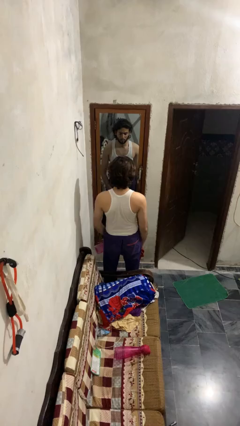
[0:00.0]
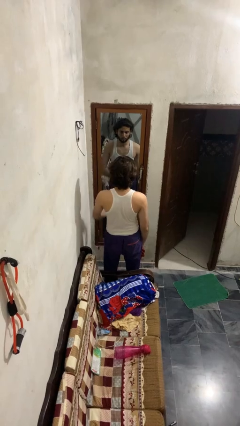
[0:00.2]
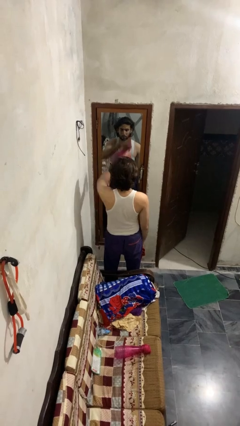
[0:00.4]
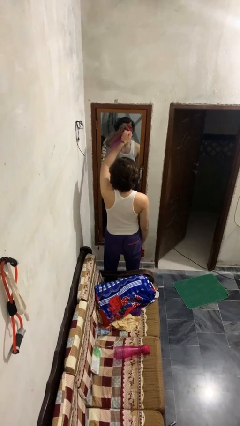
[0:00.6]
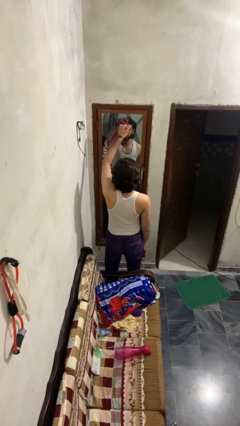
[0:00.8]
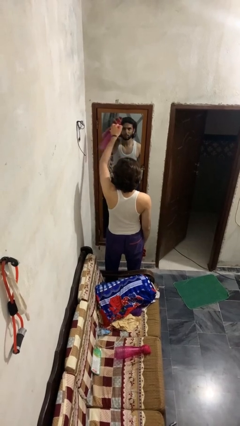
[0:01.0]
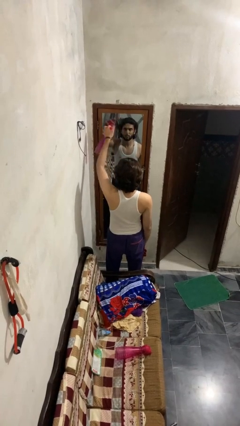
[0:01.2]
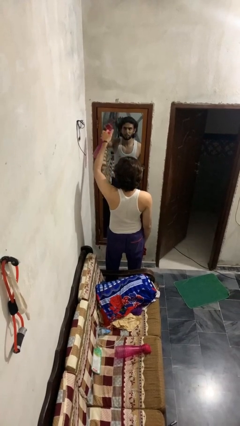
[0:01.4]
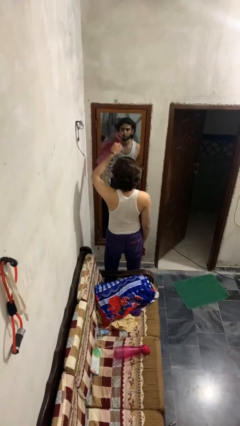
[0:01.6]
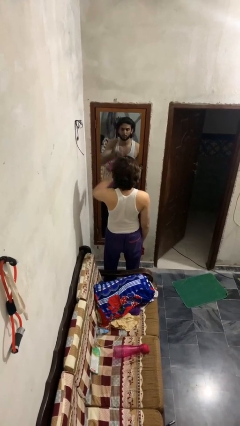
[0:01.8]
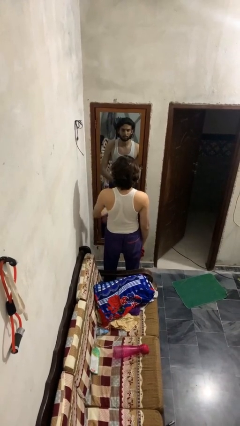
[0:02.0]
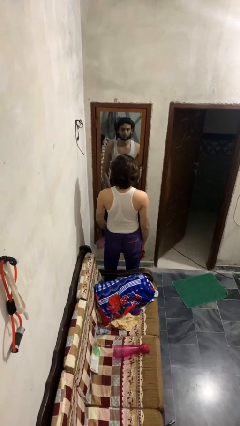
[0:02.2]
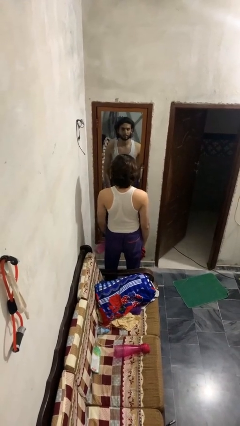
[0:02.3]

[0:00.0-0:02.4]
person sprays from bottle

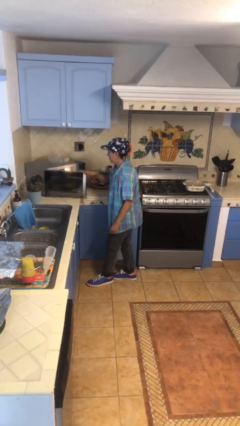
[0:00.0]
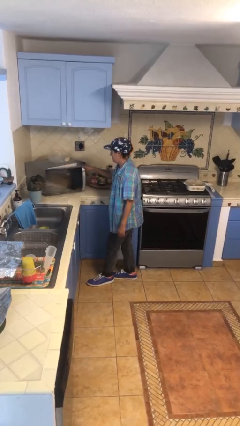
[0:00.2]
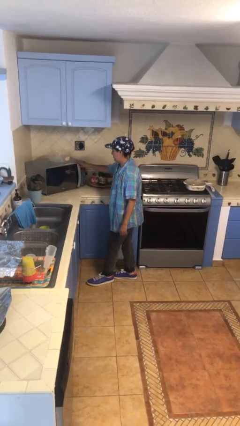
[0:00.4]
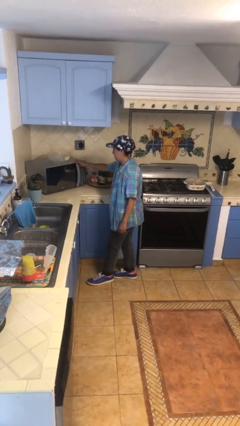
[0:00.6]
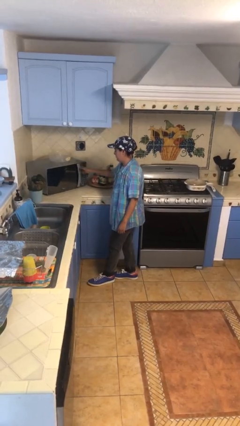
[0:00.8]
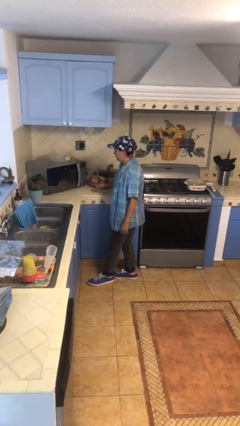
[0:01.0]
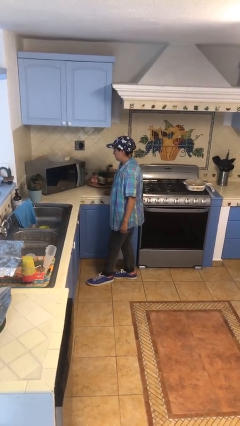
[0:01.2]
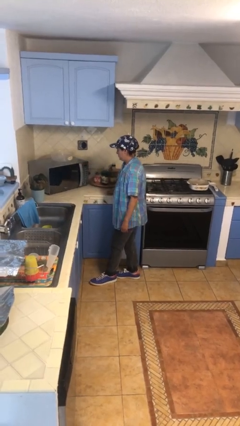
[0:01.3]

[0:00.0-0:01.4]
person closes microwave

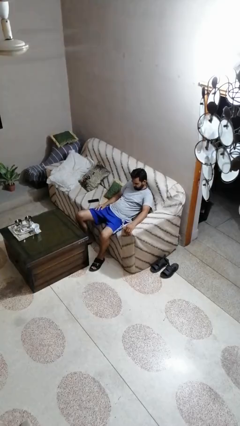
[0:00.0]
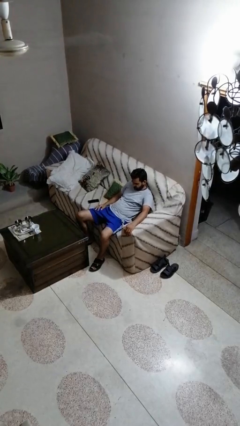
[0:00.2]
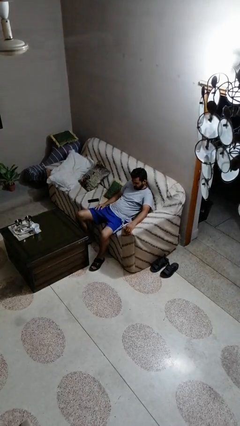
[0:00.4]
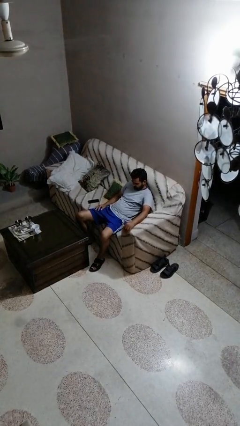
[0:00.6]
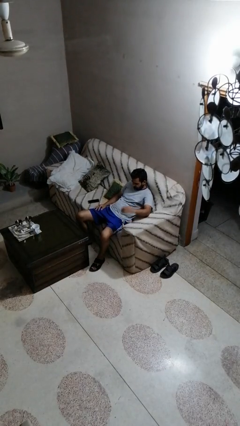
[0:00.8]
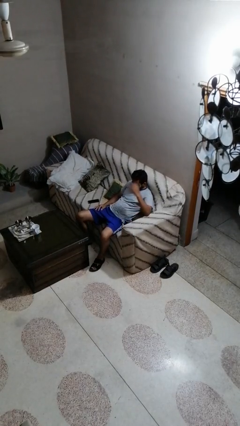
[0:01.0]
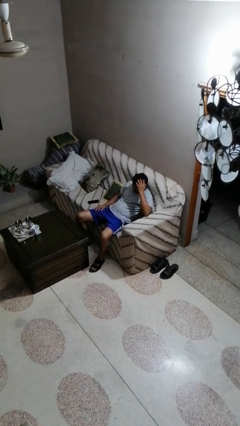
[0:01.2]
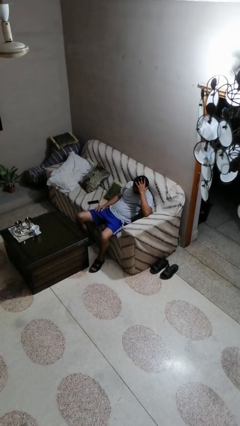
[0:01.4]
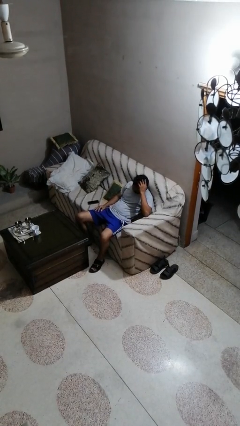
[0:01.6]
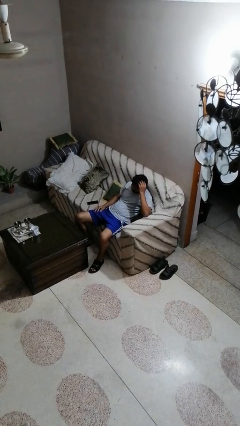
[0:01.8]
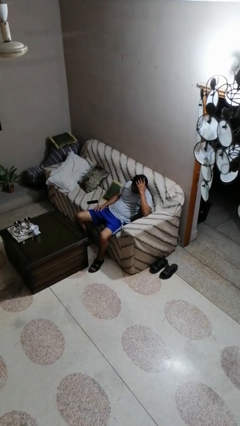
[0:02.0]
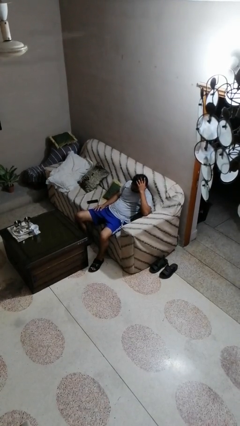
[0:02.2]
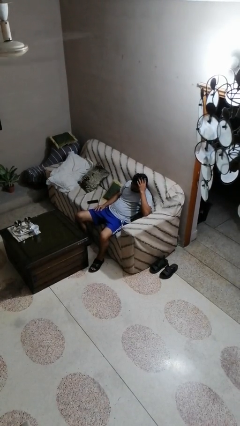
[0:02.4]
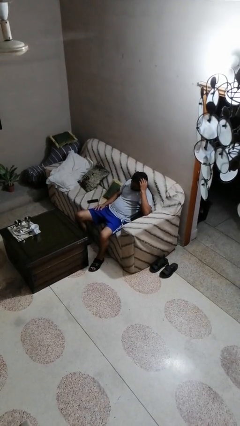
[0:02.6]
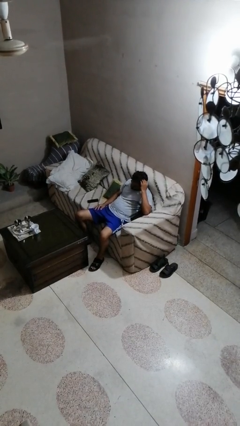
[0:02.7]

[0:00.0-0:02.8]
person strokes hair

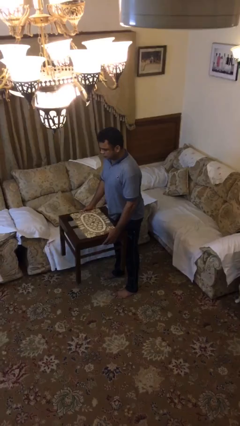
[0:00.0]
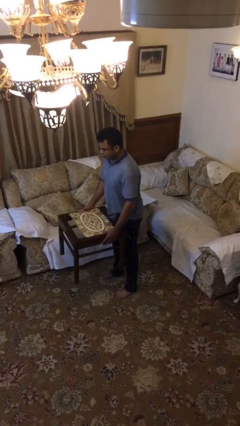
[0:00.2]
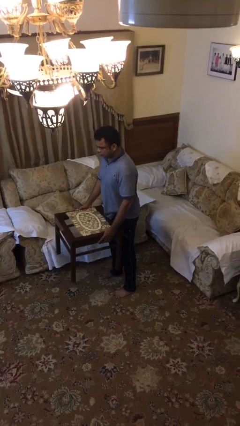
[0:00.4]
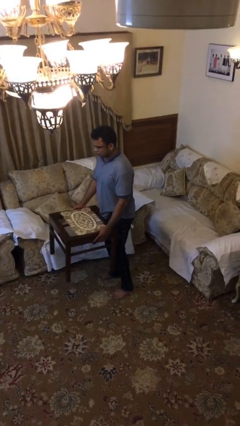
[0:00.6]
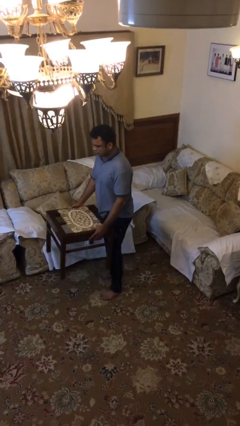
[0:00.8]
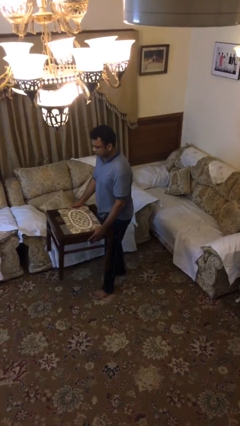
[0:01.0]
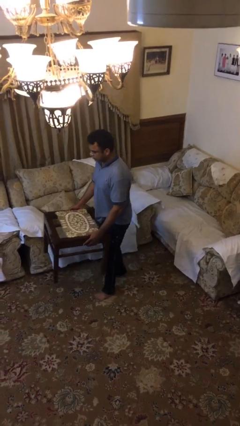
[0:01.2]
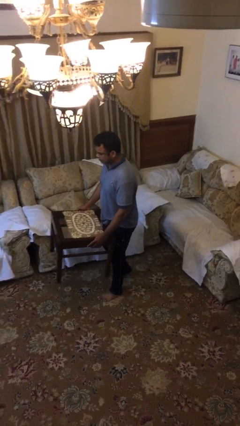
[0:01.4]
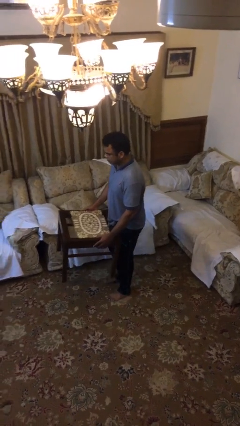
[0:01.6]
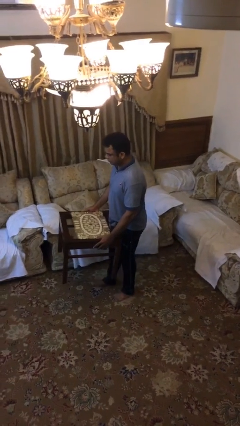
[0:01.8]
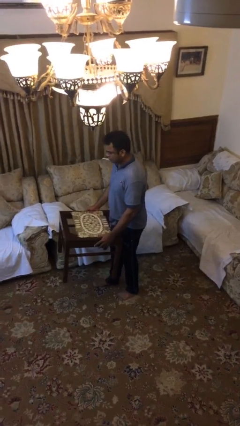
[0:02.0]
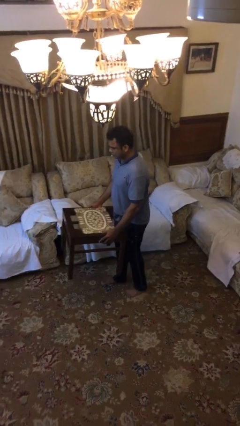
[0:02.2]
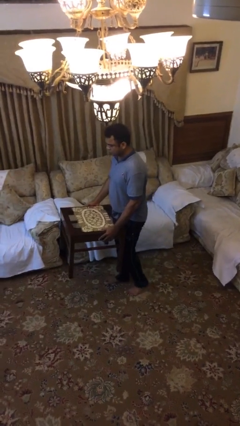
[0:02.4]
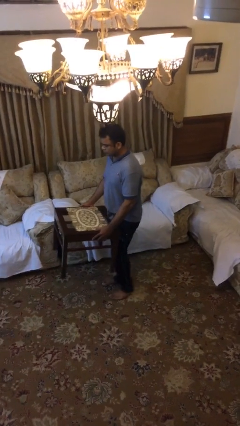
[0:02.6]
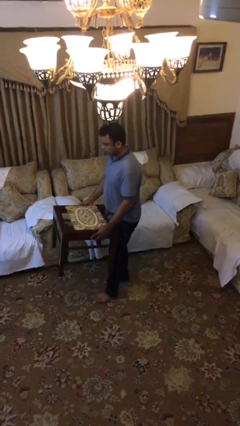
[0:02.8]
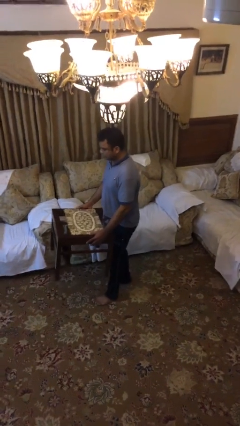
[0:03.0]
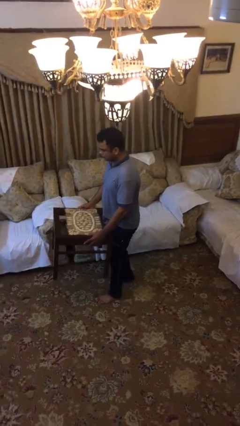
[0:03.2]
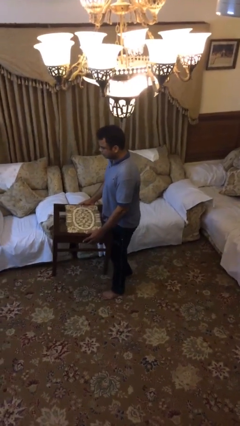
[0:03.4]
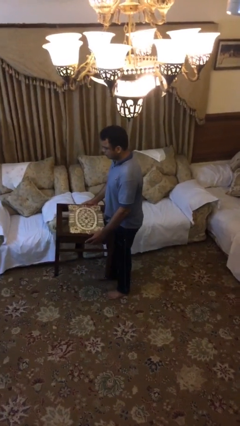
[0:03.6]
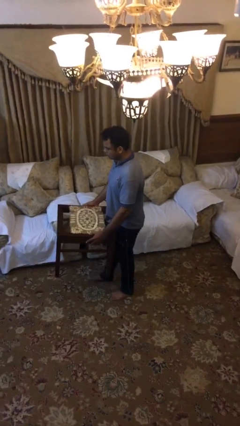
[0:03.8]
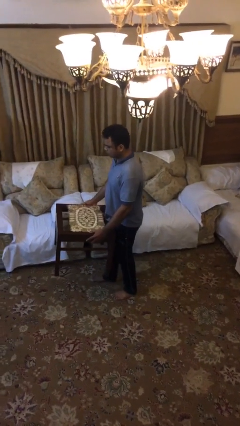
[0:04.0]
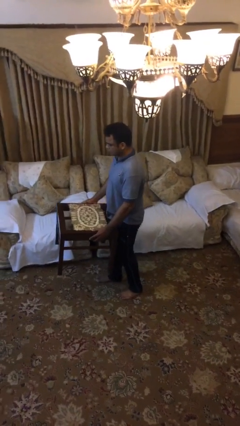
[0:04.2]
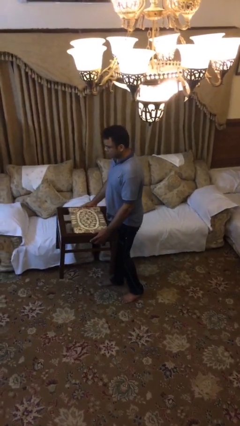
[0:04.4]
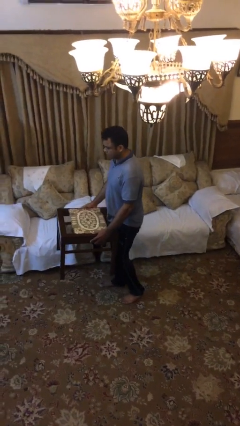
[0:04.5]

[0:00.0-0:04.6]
person carries heavy object

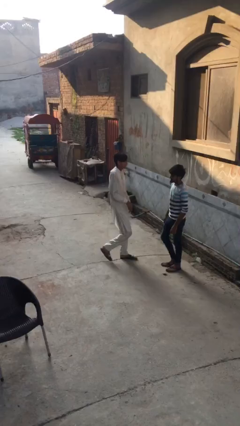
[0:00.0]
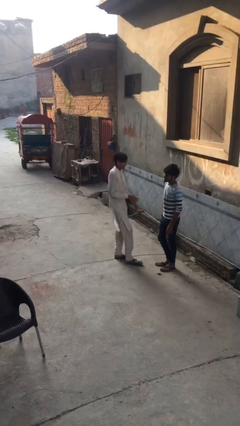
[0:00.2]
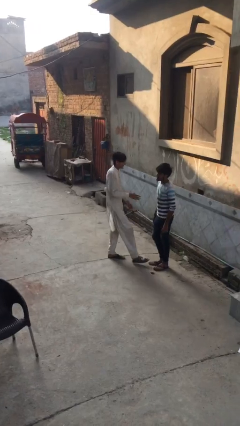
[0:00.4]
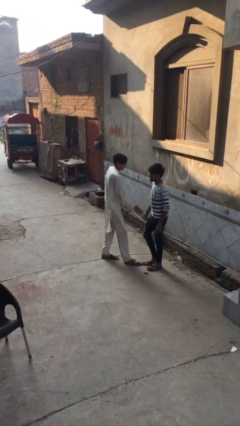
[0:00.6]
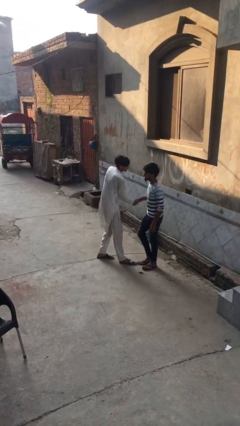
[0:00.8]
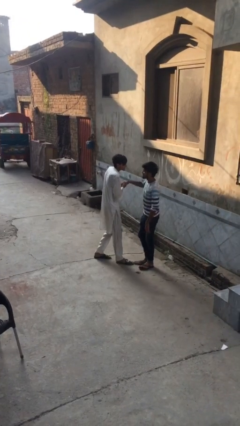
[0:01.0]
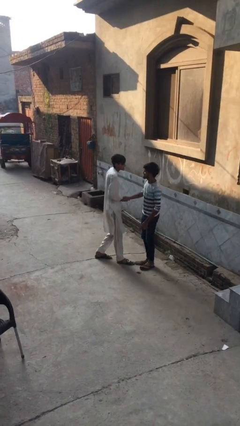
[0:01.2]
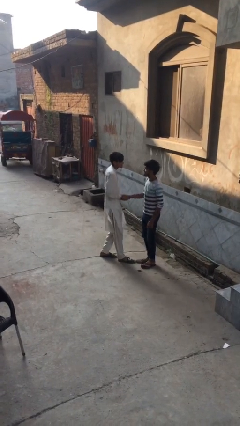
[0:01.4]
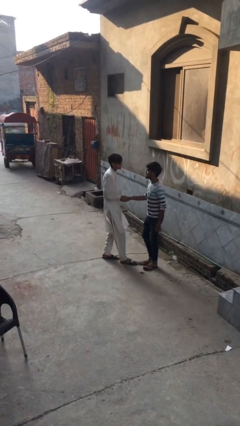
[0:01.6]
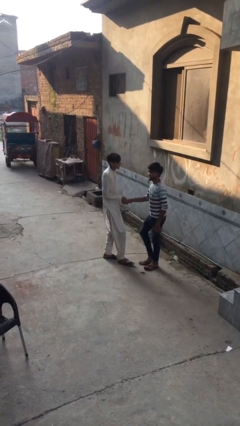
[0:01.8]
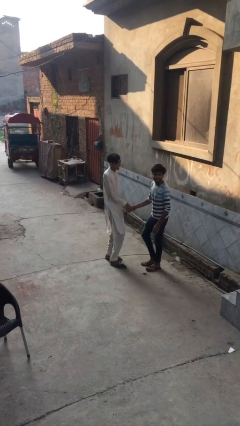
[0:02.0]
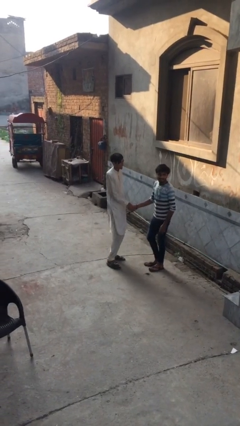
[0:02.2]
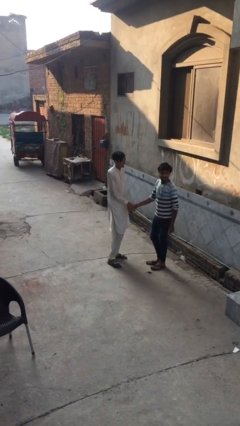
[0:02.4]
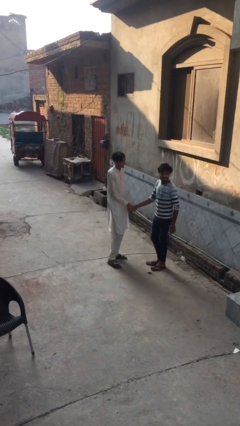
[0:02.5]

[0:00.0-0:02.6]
person shakes hand

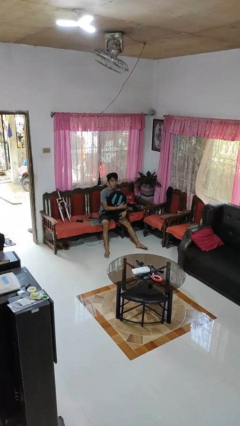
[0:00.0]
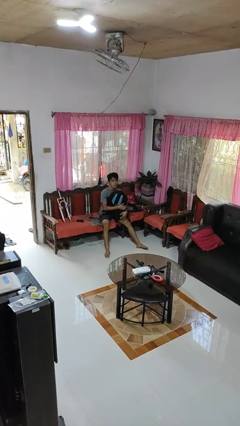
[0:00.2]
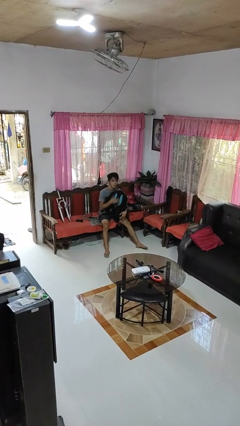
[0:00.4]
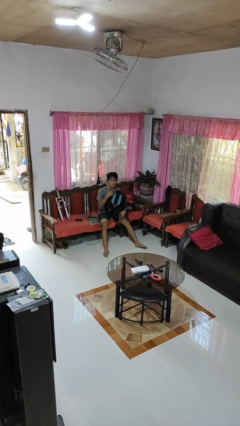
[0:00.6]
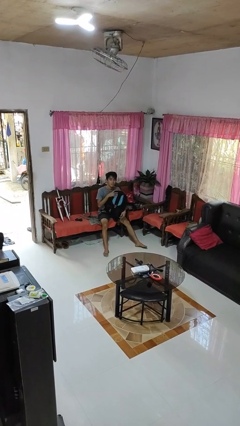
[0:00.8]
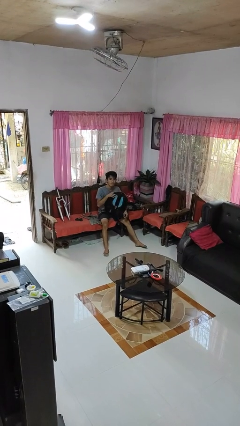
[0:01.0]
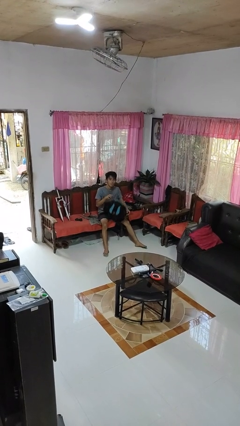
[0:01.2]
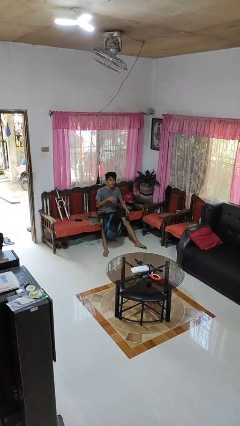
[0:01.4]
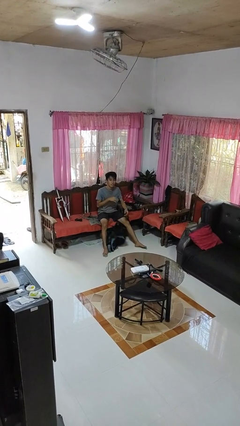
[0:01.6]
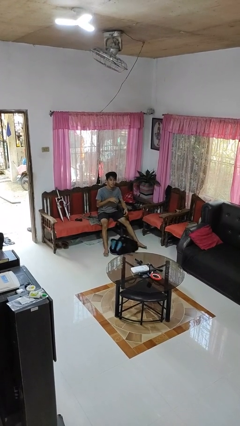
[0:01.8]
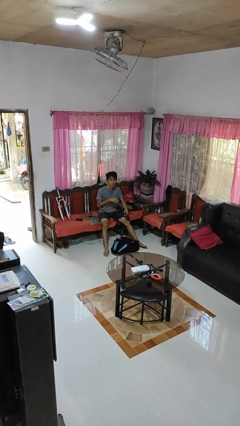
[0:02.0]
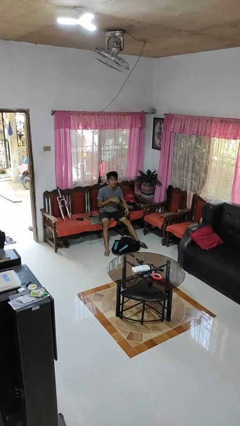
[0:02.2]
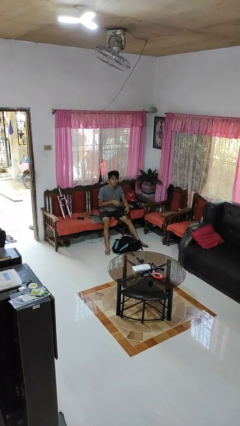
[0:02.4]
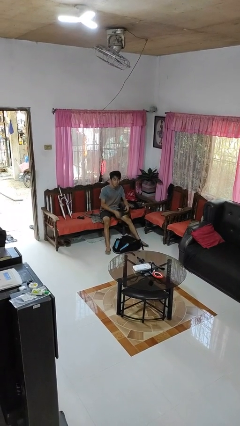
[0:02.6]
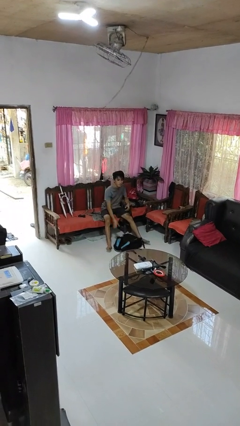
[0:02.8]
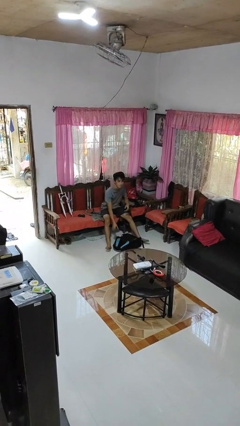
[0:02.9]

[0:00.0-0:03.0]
person drops object

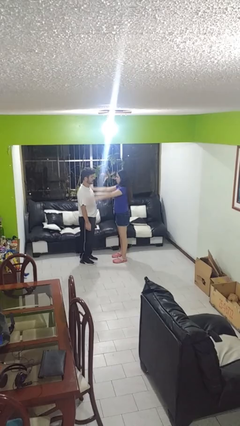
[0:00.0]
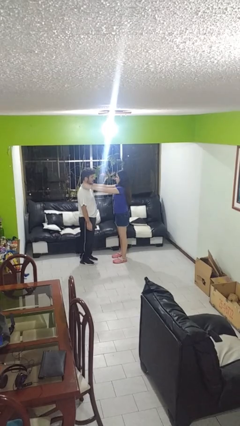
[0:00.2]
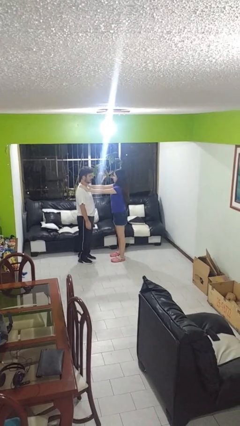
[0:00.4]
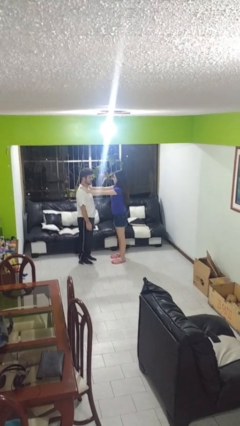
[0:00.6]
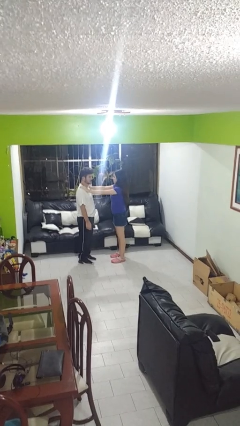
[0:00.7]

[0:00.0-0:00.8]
person grabs person by shoulder
